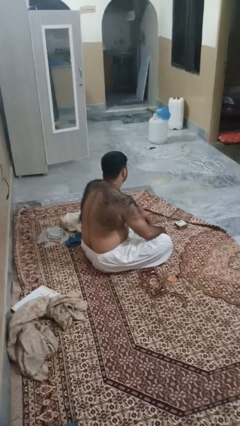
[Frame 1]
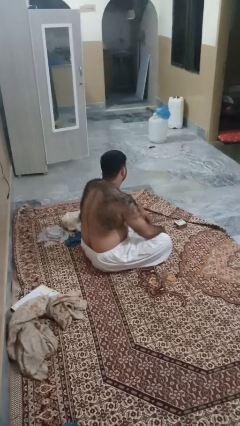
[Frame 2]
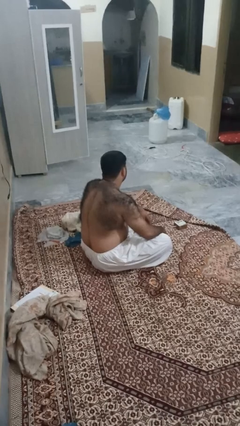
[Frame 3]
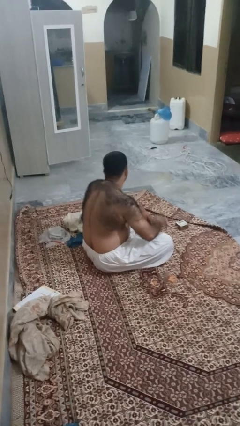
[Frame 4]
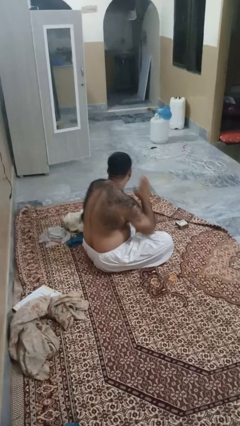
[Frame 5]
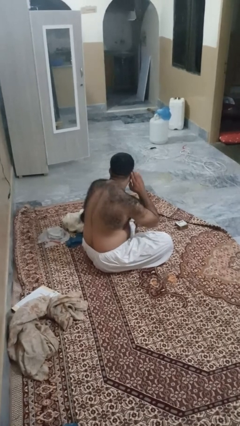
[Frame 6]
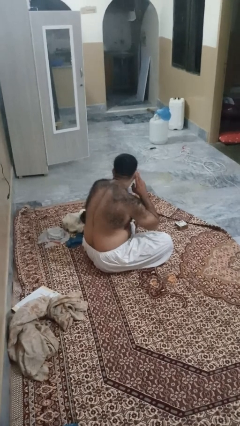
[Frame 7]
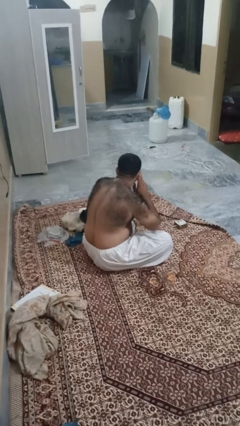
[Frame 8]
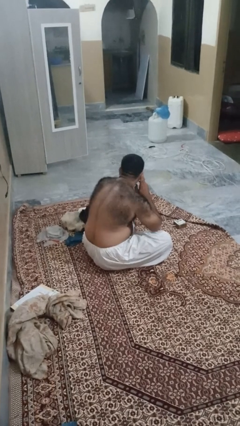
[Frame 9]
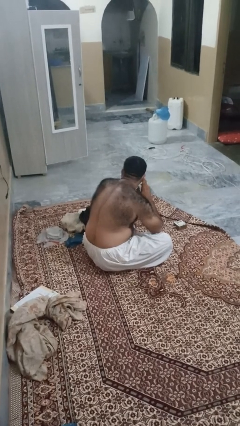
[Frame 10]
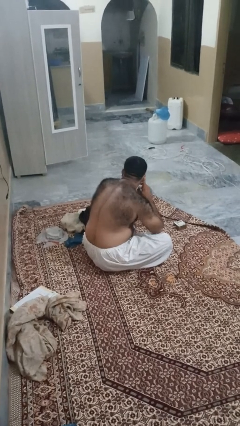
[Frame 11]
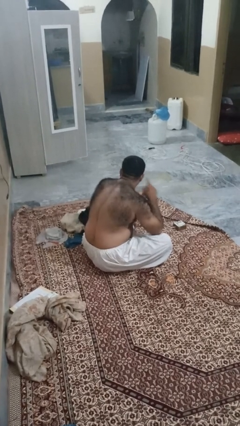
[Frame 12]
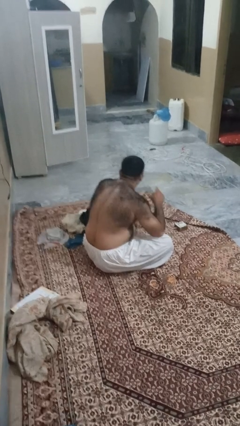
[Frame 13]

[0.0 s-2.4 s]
person gestures listen closely

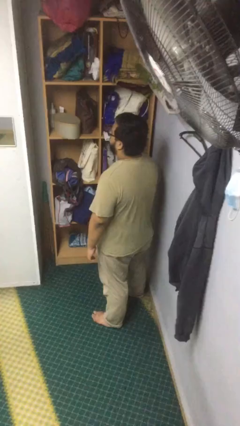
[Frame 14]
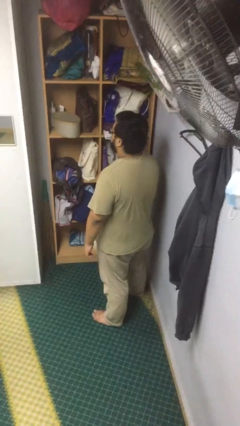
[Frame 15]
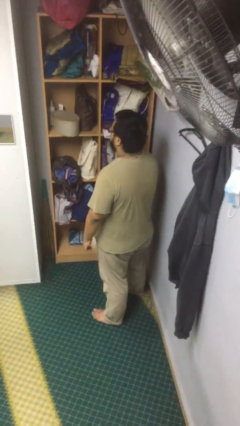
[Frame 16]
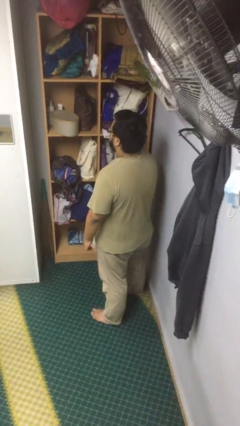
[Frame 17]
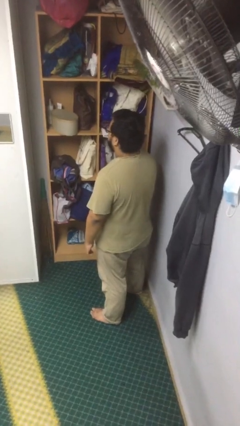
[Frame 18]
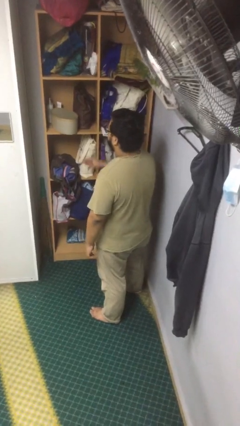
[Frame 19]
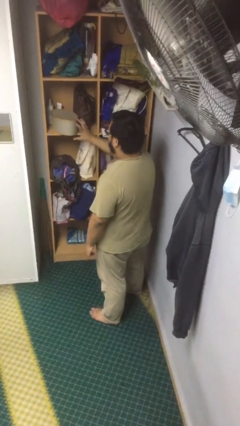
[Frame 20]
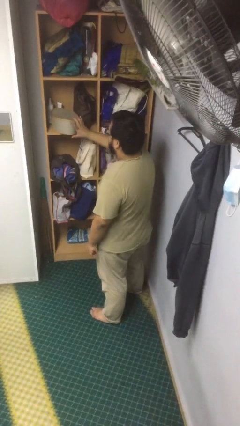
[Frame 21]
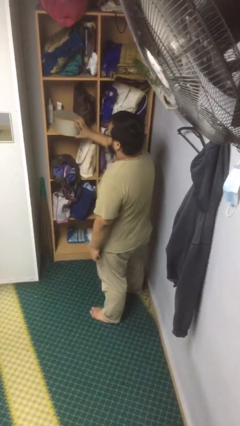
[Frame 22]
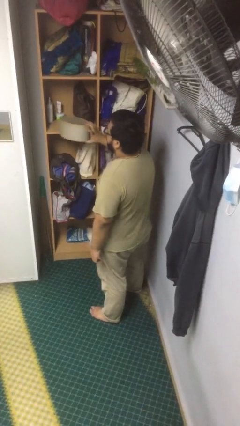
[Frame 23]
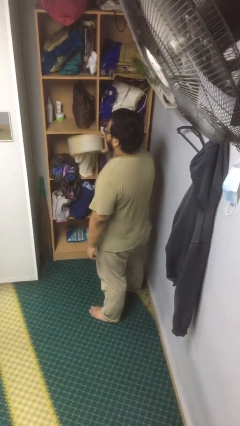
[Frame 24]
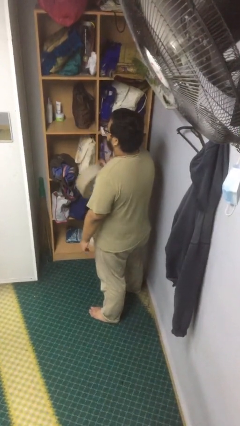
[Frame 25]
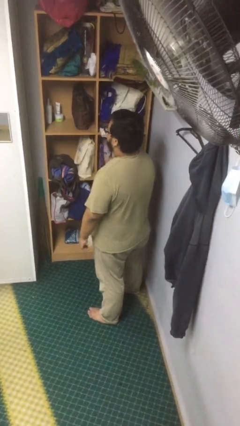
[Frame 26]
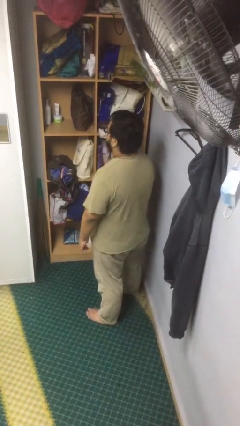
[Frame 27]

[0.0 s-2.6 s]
person picks up object from cabinet

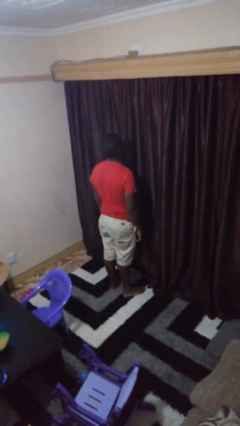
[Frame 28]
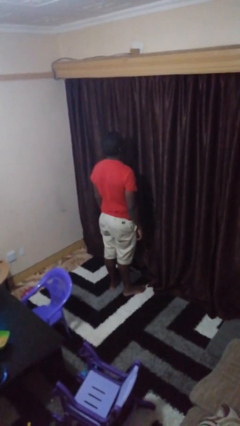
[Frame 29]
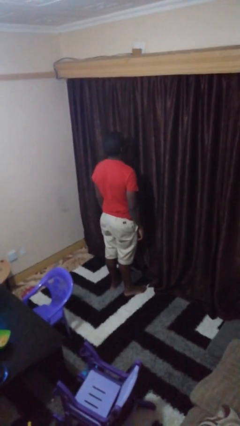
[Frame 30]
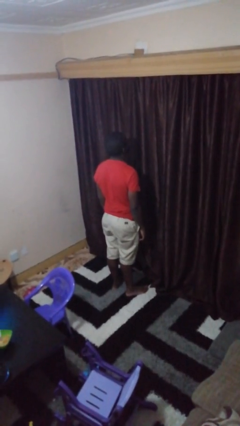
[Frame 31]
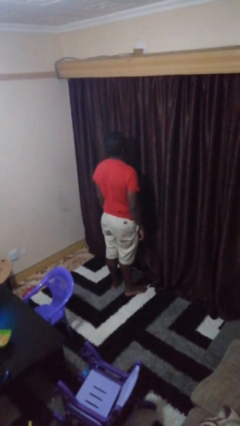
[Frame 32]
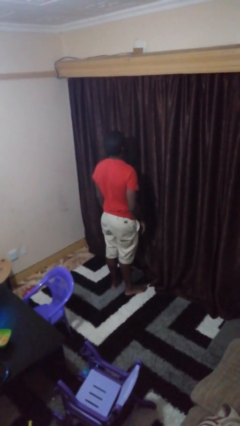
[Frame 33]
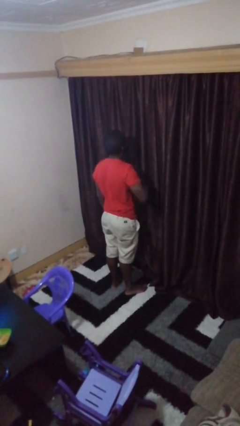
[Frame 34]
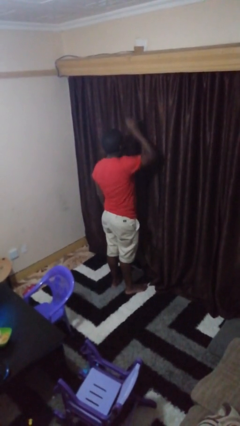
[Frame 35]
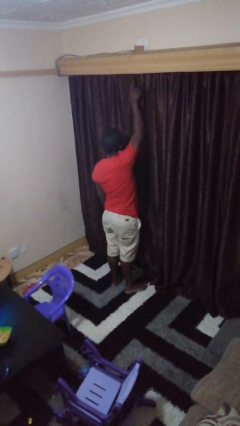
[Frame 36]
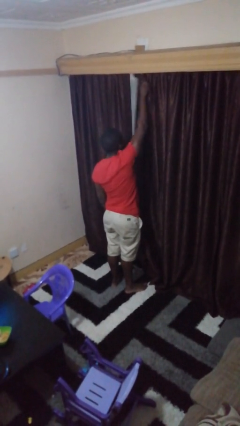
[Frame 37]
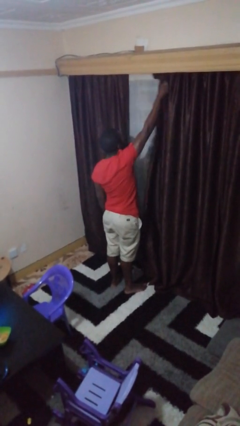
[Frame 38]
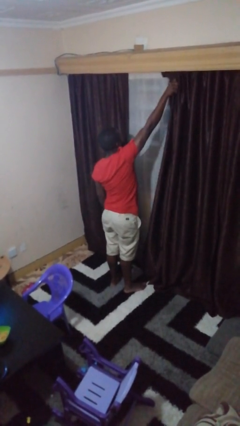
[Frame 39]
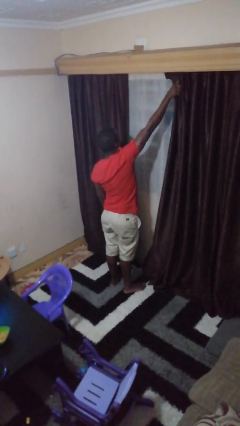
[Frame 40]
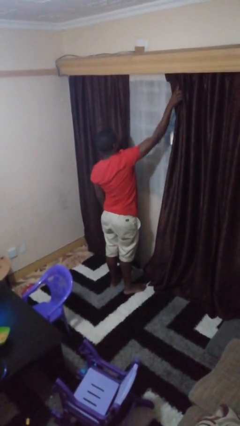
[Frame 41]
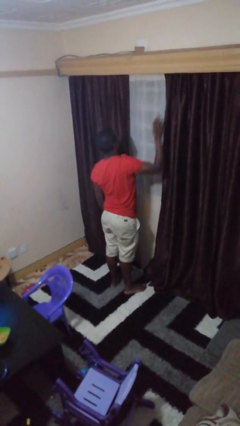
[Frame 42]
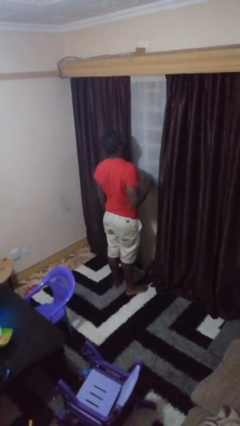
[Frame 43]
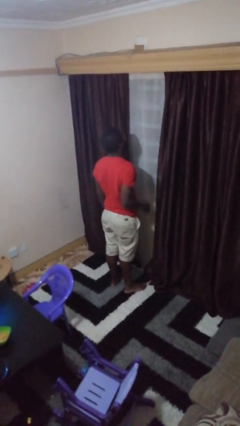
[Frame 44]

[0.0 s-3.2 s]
person opens curtains

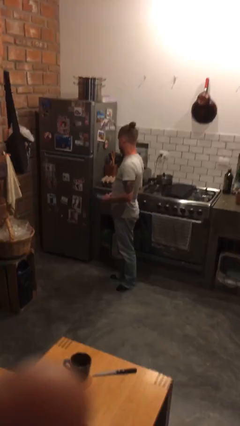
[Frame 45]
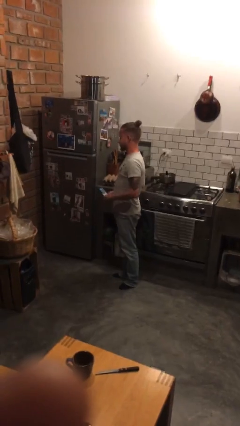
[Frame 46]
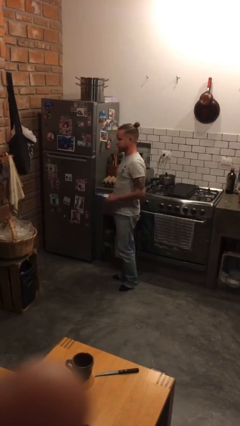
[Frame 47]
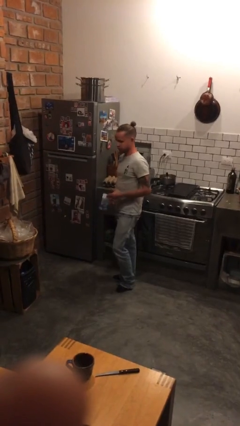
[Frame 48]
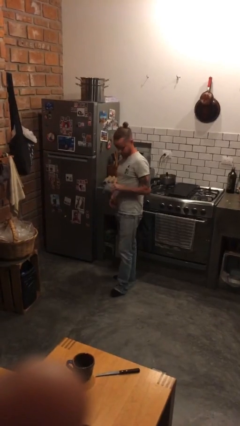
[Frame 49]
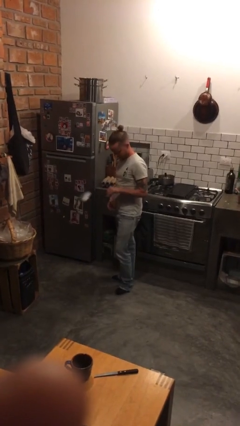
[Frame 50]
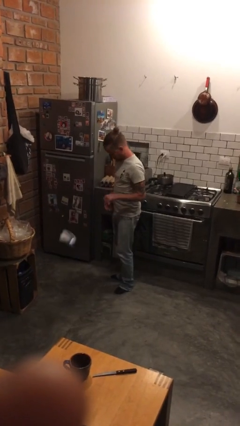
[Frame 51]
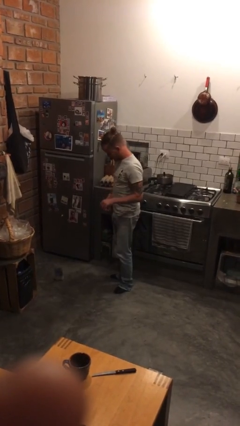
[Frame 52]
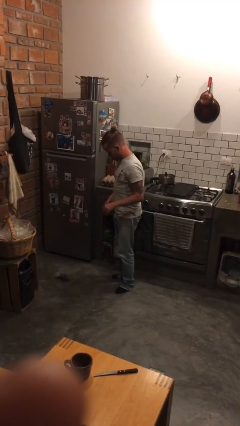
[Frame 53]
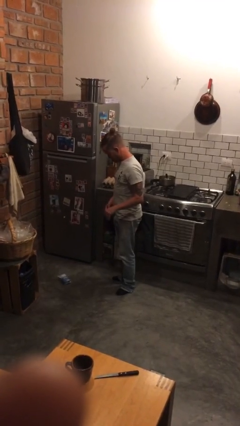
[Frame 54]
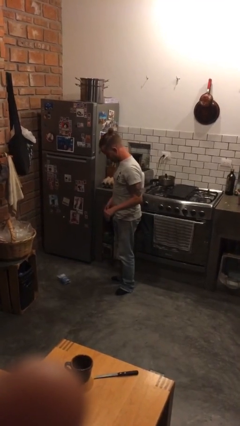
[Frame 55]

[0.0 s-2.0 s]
person drops object

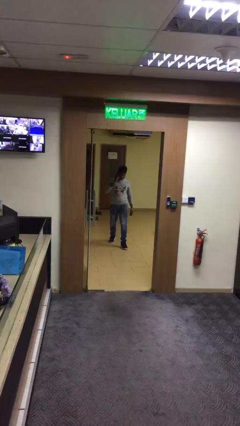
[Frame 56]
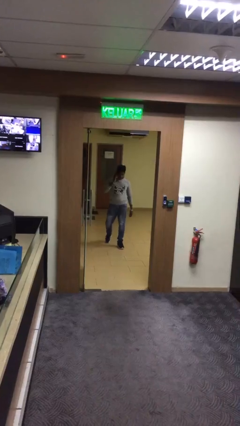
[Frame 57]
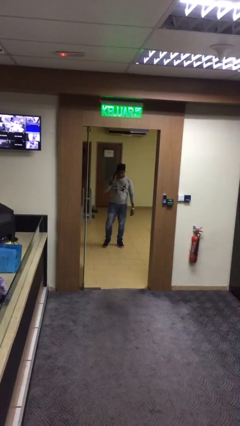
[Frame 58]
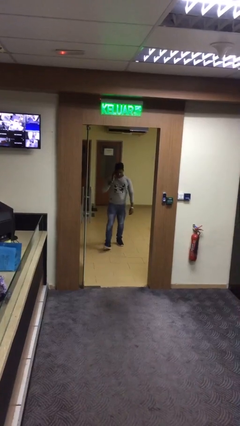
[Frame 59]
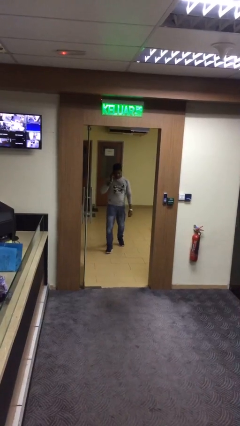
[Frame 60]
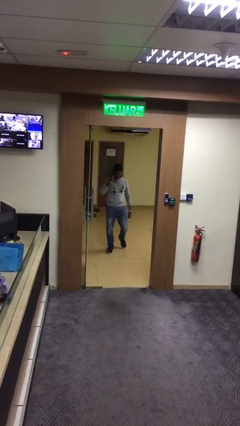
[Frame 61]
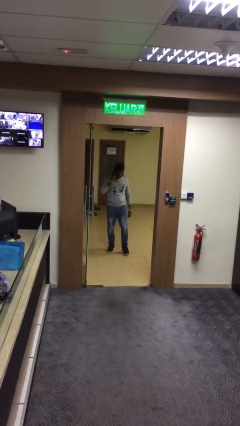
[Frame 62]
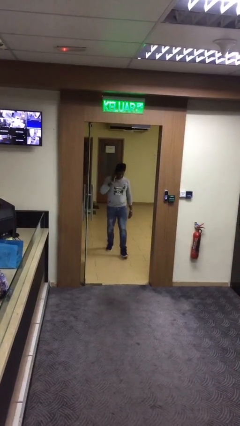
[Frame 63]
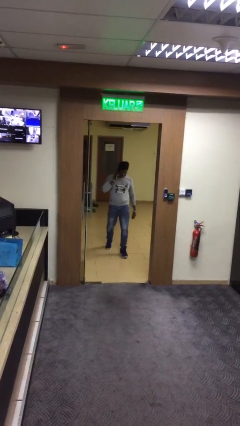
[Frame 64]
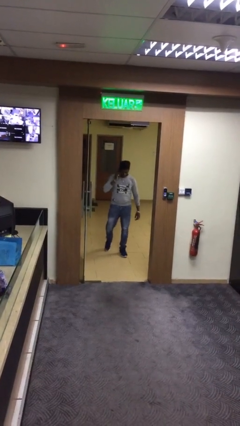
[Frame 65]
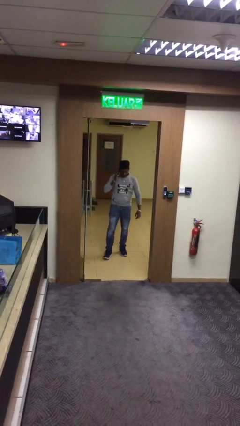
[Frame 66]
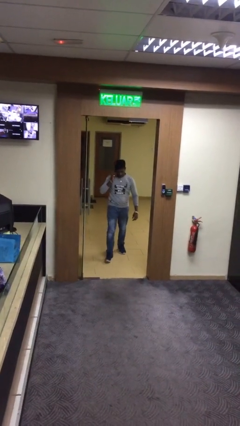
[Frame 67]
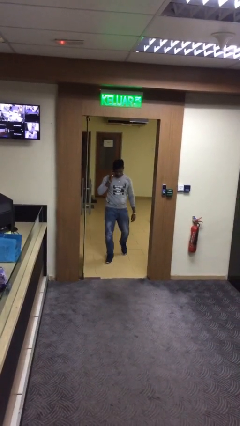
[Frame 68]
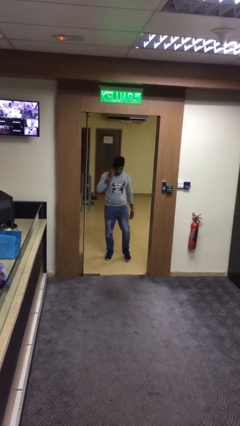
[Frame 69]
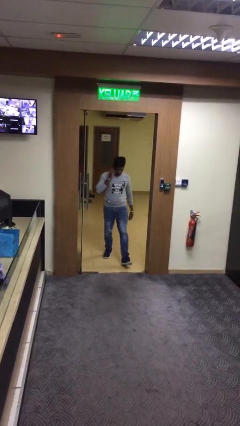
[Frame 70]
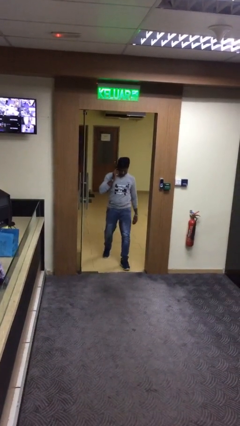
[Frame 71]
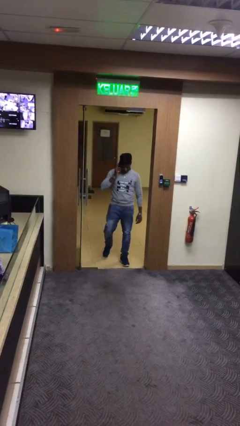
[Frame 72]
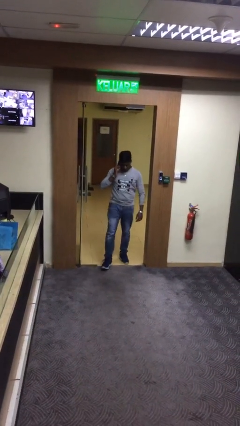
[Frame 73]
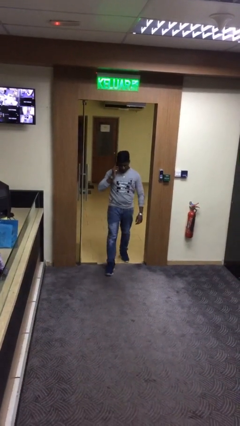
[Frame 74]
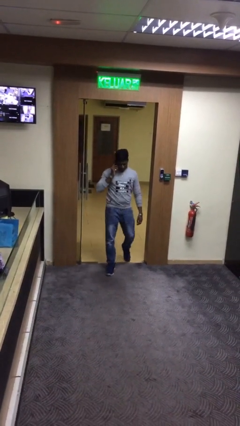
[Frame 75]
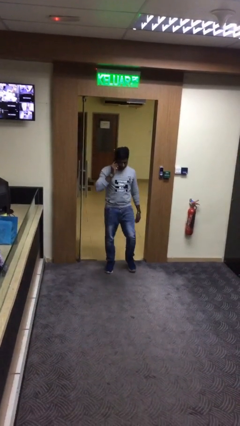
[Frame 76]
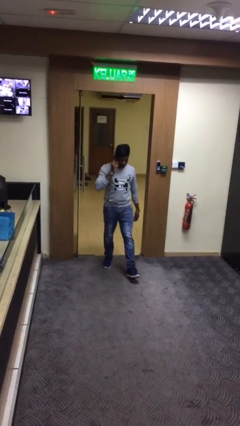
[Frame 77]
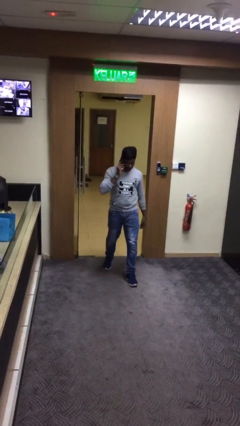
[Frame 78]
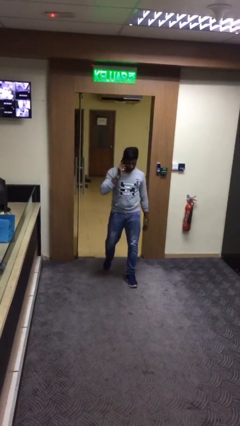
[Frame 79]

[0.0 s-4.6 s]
person enters scene through structure

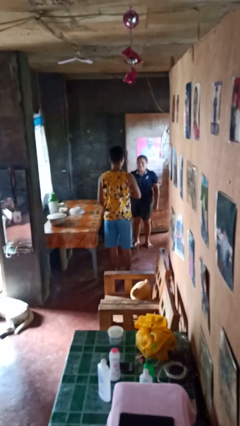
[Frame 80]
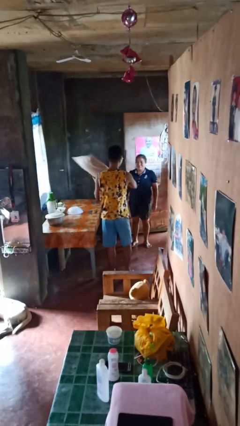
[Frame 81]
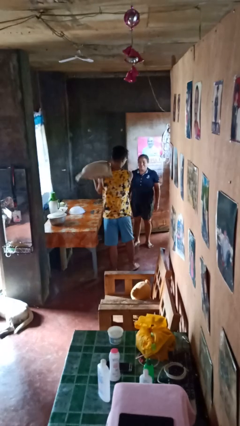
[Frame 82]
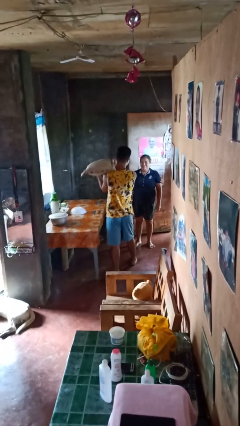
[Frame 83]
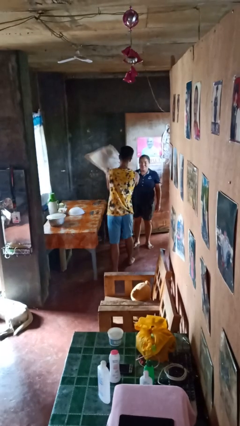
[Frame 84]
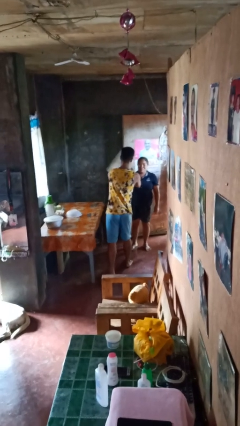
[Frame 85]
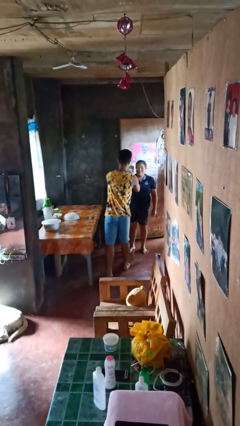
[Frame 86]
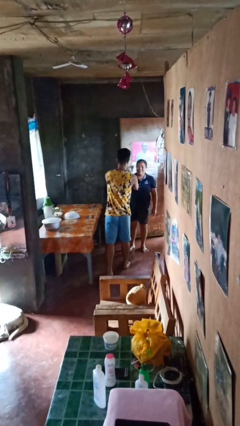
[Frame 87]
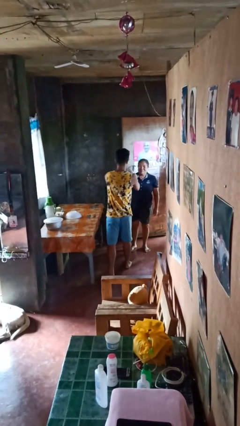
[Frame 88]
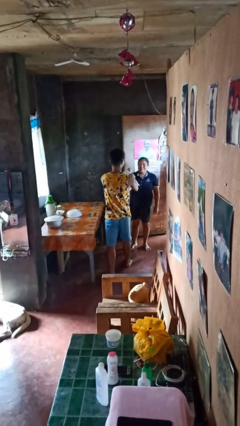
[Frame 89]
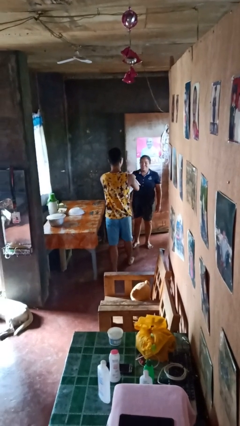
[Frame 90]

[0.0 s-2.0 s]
person hits person with pillow

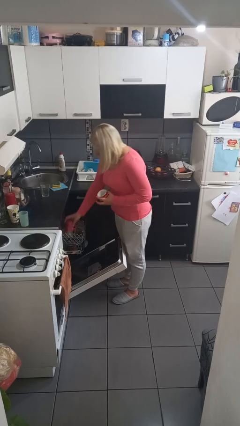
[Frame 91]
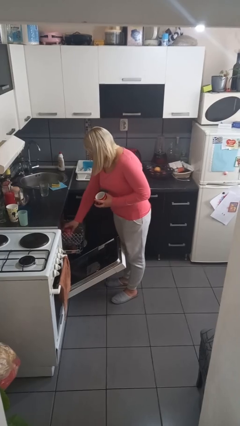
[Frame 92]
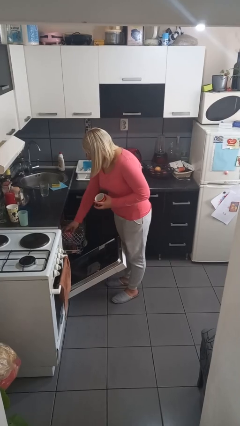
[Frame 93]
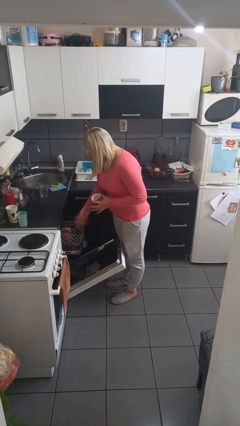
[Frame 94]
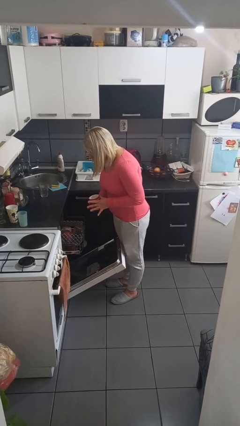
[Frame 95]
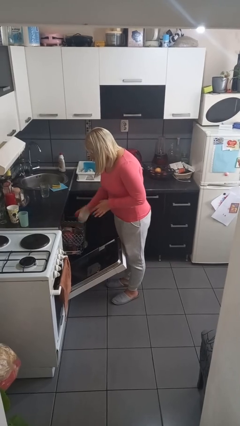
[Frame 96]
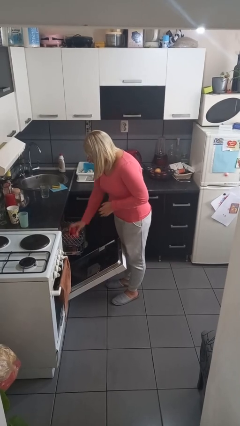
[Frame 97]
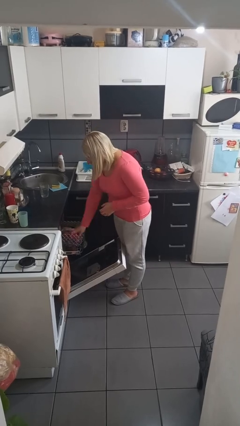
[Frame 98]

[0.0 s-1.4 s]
person loads dishwasher
